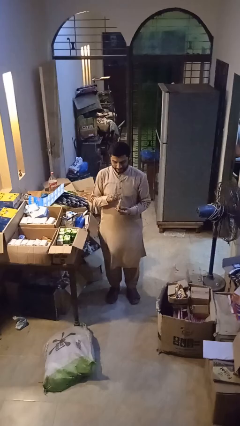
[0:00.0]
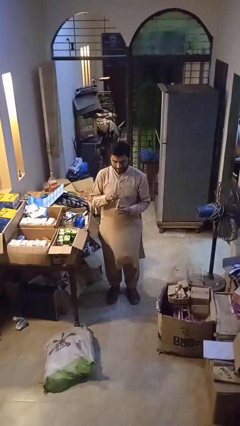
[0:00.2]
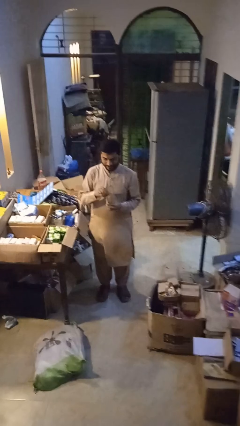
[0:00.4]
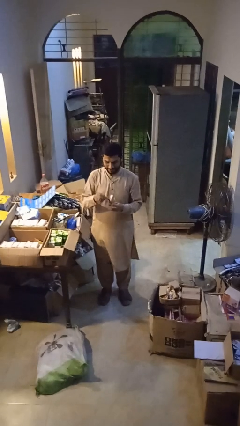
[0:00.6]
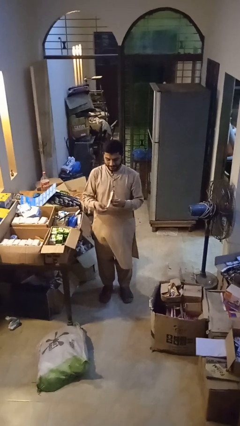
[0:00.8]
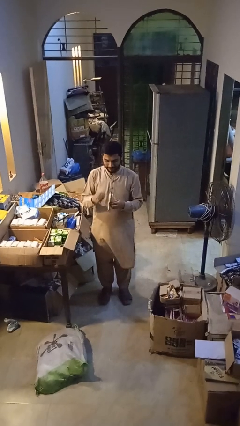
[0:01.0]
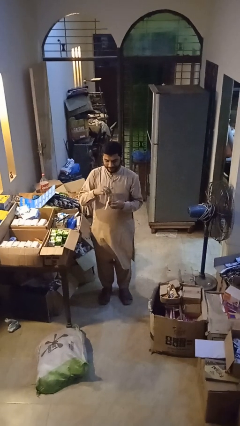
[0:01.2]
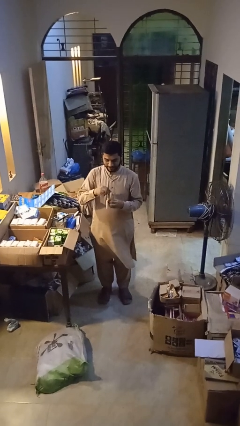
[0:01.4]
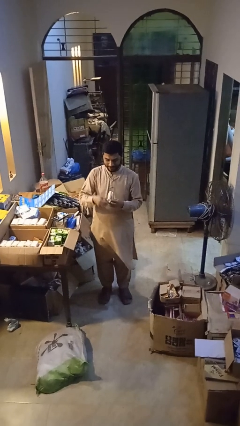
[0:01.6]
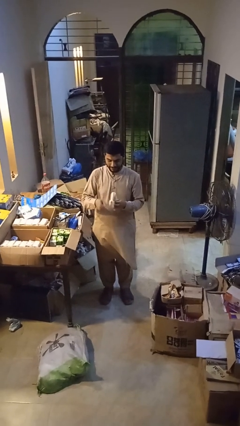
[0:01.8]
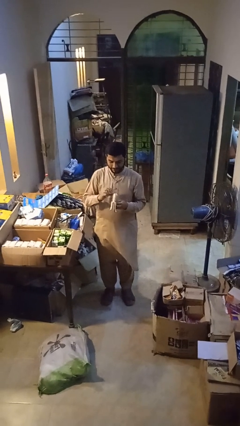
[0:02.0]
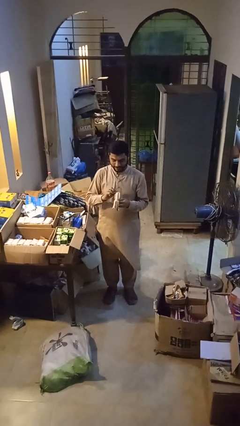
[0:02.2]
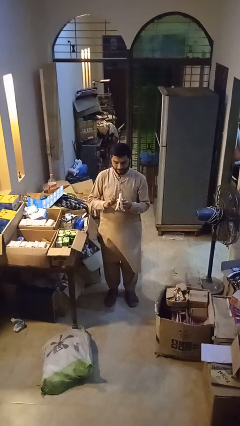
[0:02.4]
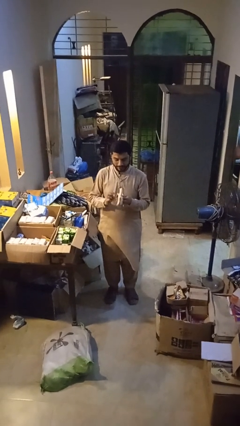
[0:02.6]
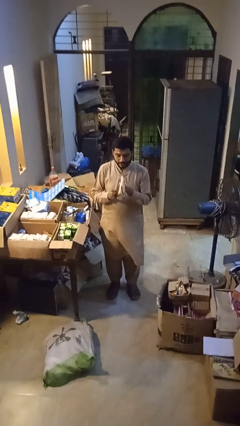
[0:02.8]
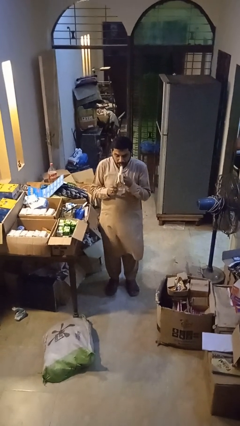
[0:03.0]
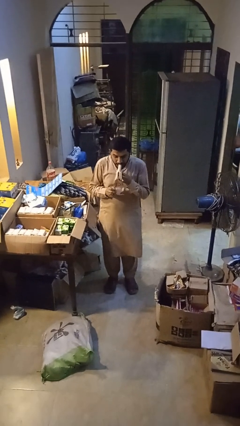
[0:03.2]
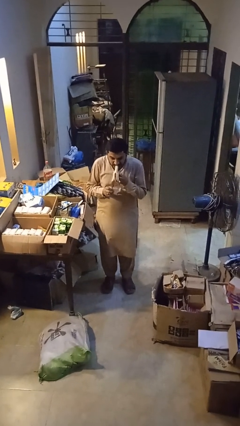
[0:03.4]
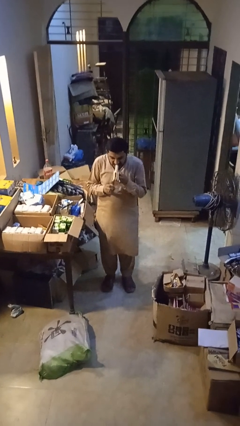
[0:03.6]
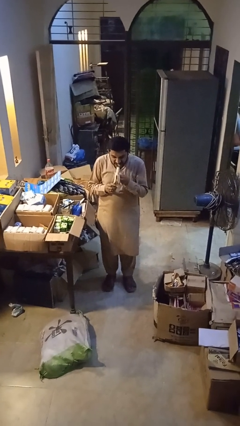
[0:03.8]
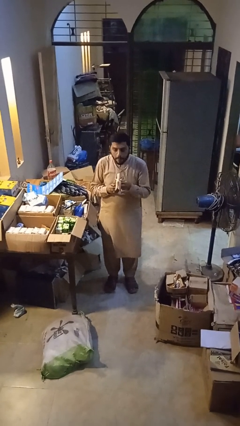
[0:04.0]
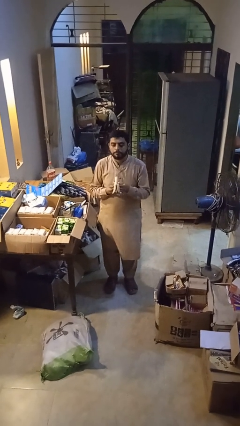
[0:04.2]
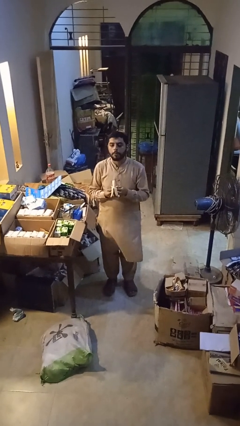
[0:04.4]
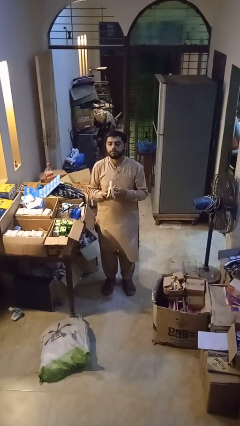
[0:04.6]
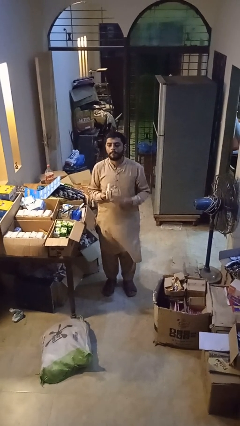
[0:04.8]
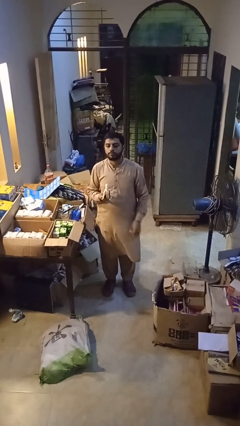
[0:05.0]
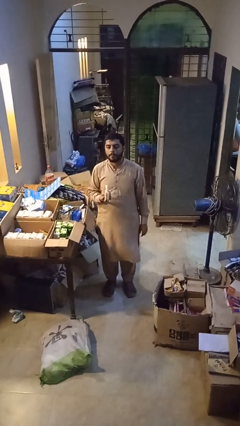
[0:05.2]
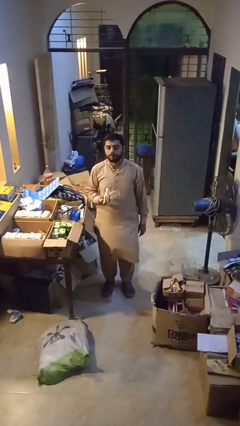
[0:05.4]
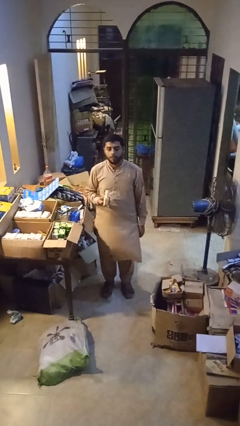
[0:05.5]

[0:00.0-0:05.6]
person eats banana

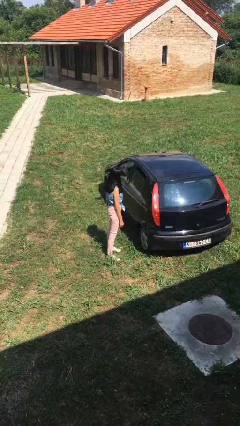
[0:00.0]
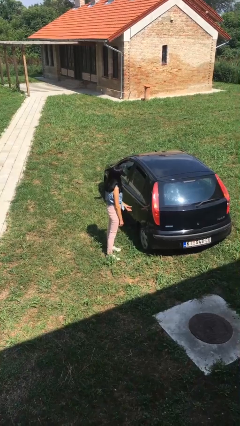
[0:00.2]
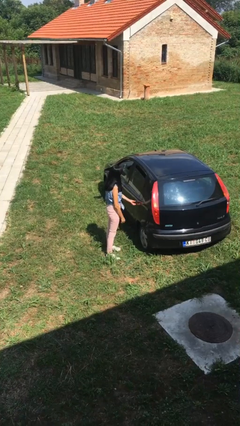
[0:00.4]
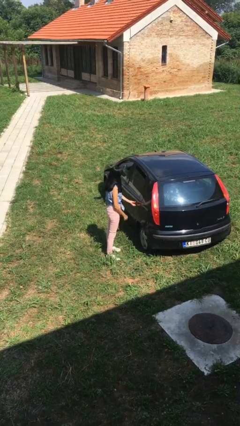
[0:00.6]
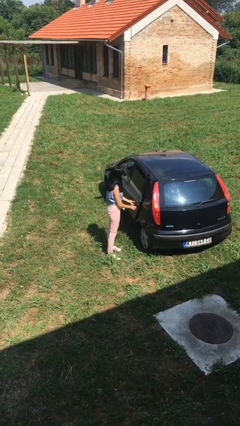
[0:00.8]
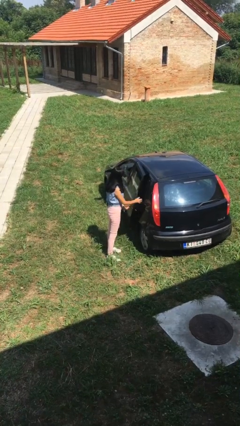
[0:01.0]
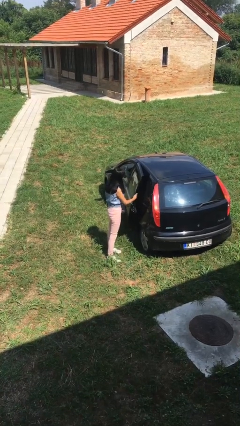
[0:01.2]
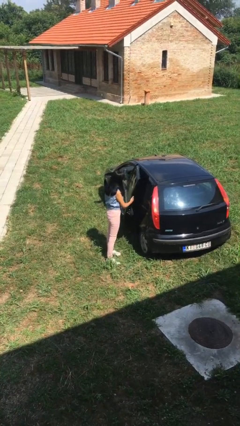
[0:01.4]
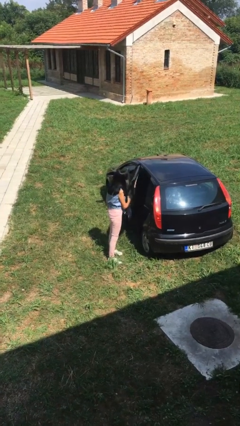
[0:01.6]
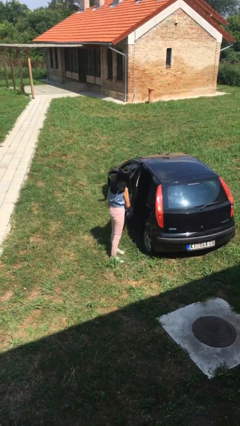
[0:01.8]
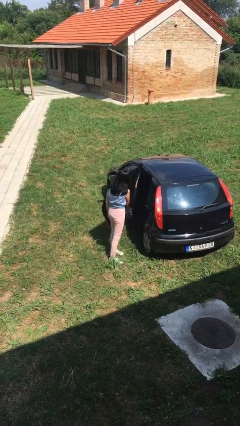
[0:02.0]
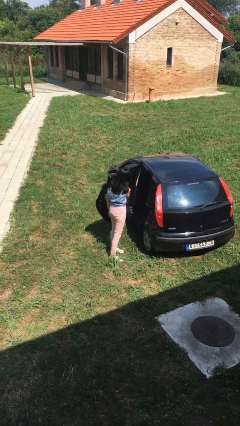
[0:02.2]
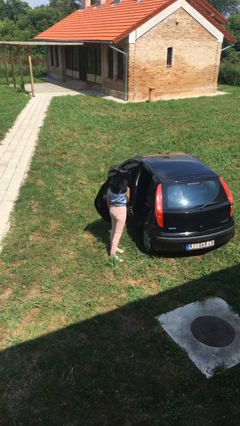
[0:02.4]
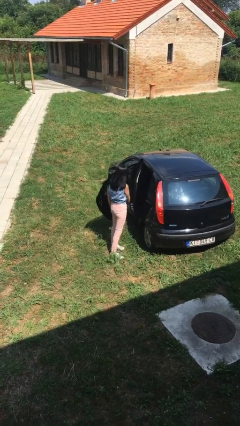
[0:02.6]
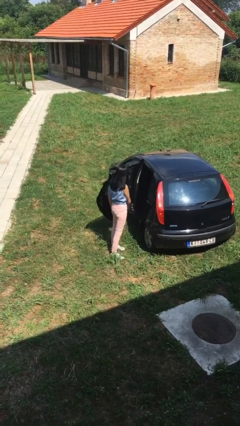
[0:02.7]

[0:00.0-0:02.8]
person opens car door

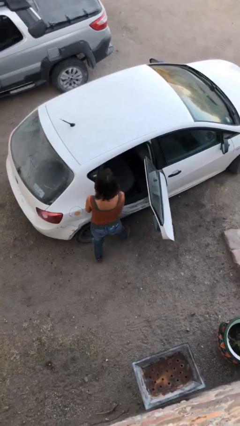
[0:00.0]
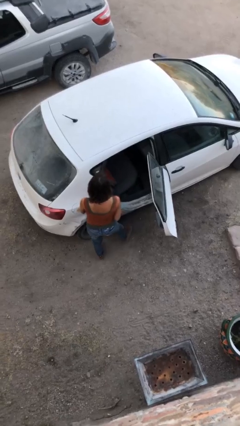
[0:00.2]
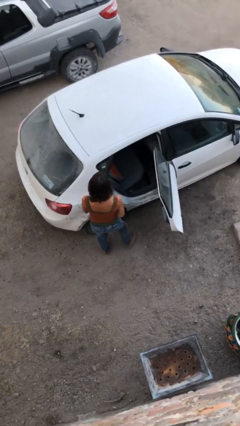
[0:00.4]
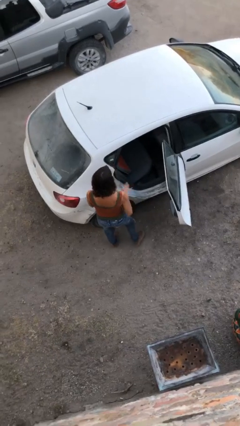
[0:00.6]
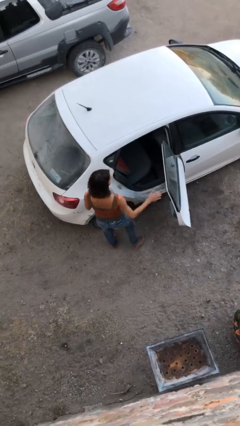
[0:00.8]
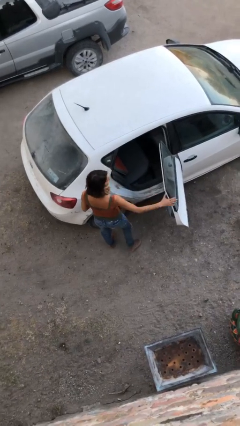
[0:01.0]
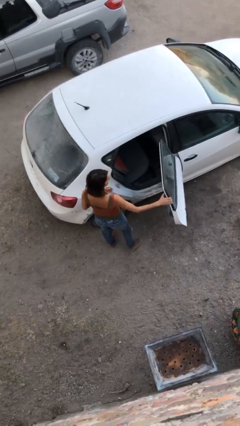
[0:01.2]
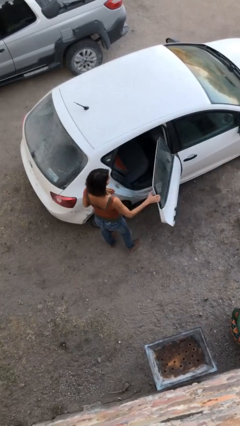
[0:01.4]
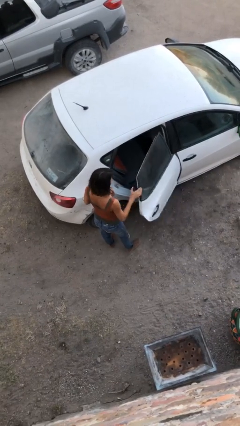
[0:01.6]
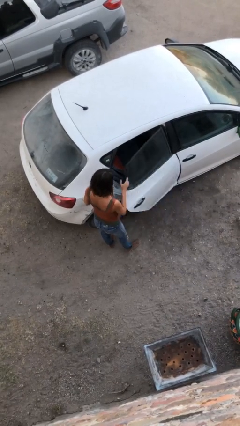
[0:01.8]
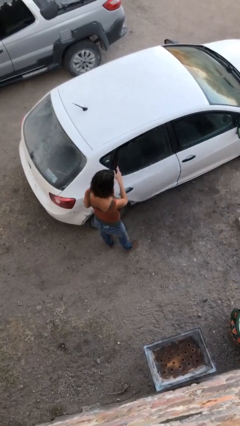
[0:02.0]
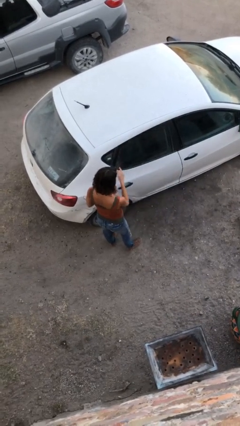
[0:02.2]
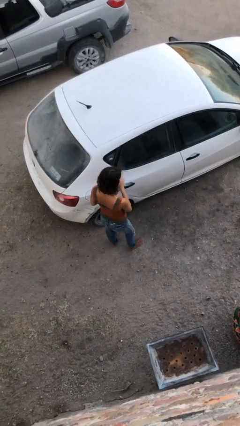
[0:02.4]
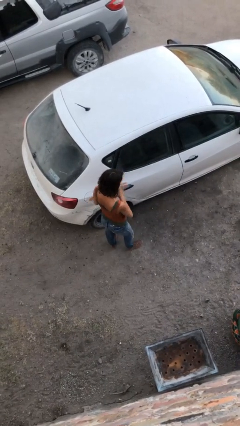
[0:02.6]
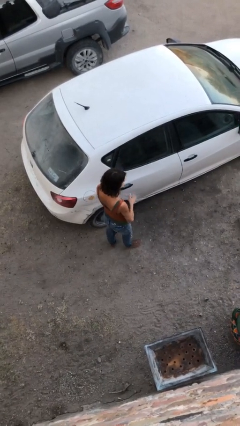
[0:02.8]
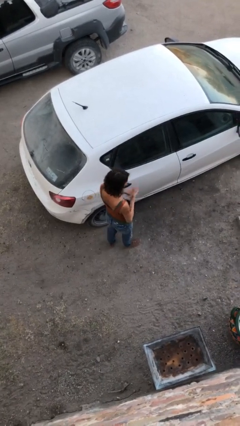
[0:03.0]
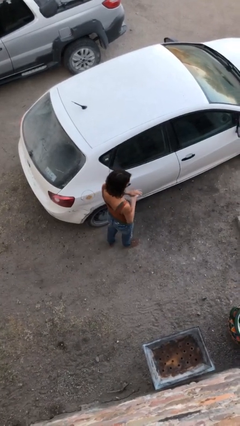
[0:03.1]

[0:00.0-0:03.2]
person closes car door

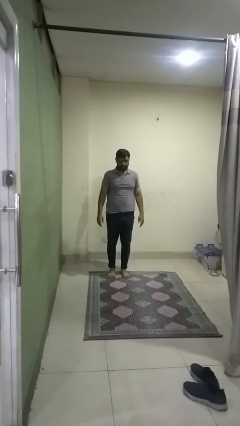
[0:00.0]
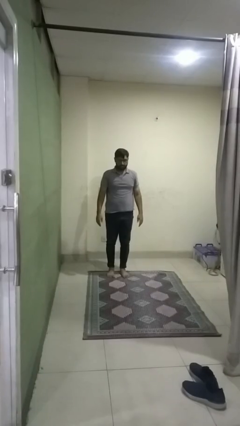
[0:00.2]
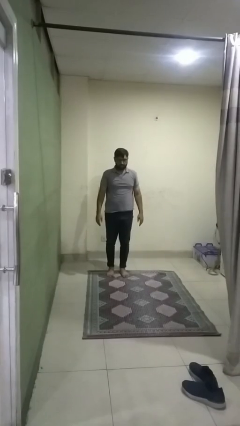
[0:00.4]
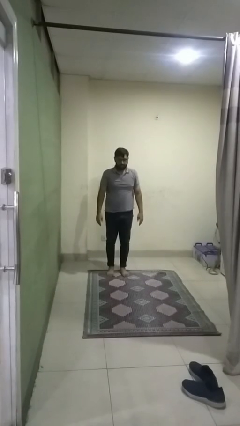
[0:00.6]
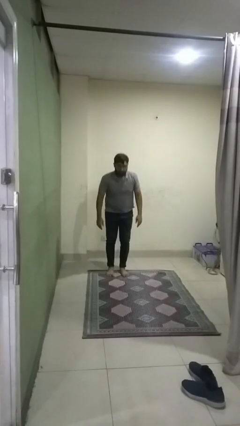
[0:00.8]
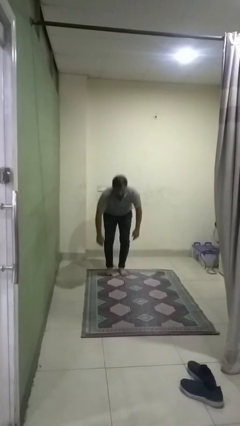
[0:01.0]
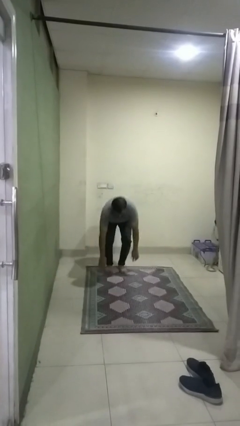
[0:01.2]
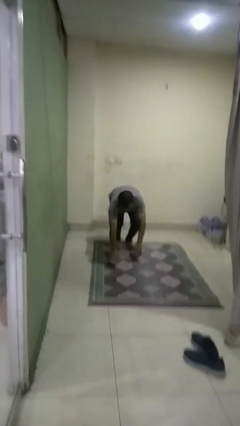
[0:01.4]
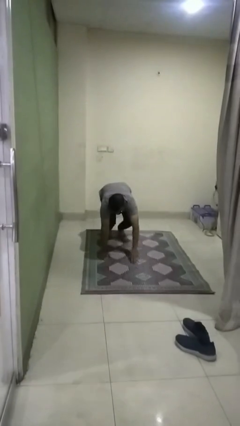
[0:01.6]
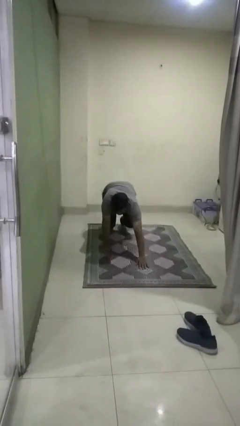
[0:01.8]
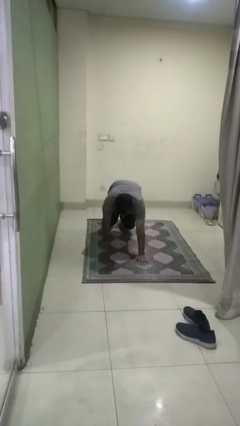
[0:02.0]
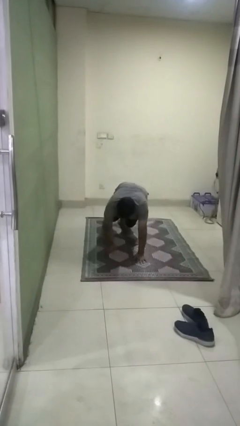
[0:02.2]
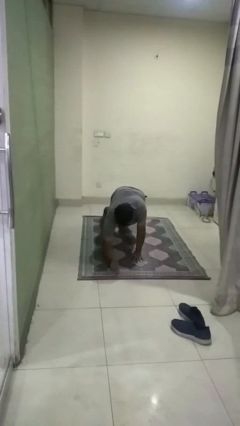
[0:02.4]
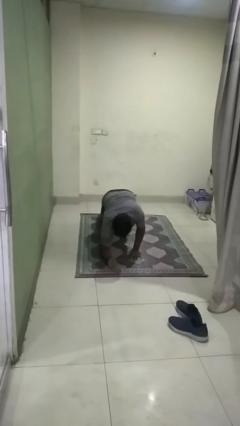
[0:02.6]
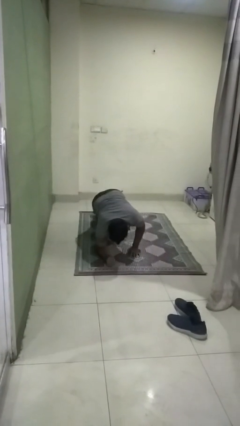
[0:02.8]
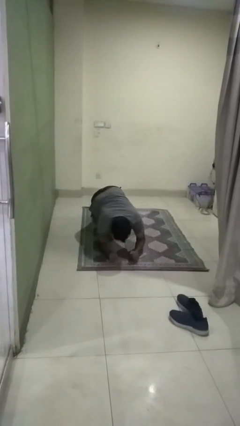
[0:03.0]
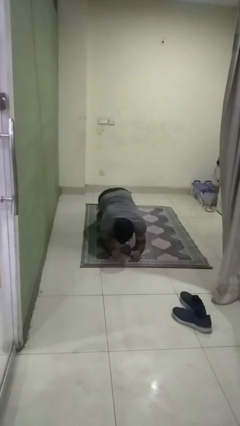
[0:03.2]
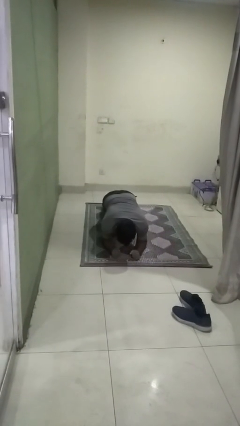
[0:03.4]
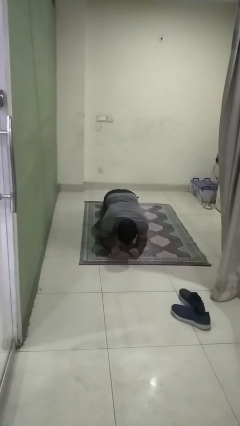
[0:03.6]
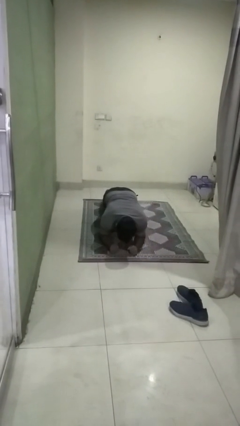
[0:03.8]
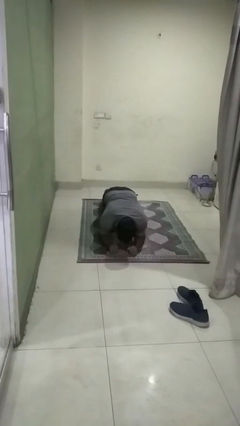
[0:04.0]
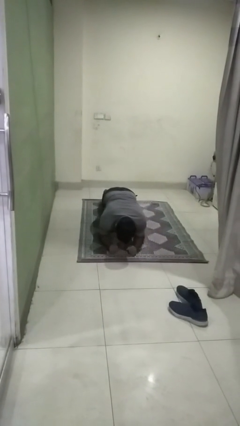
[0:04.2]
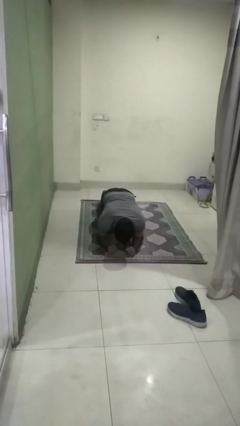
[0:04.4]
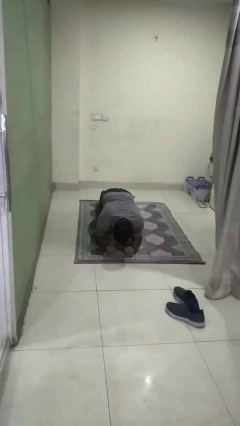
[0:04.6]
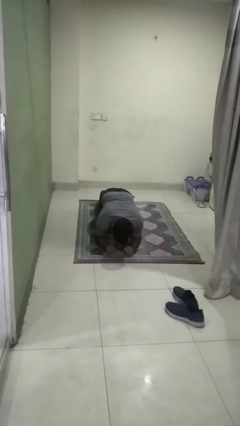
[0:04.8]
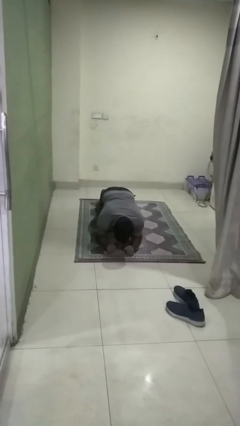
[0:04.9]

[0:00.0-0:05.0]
person exercises with plank

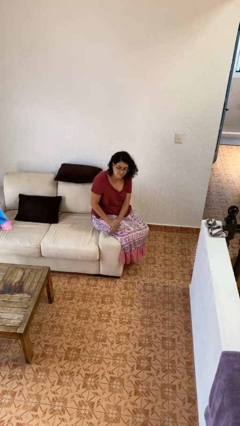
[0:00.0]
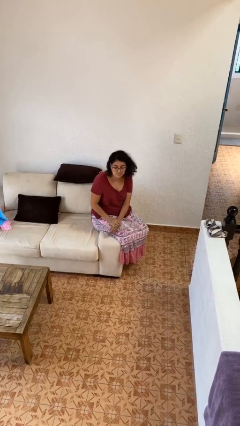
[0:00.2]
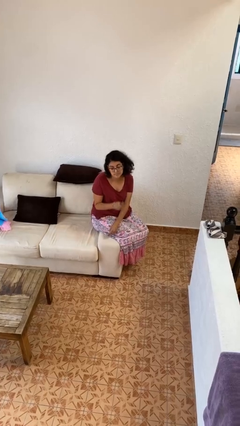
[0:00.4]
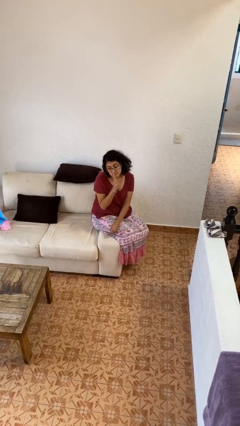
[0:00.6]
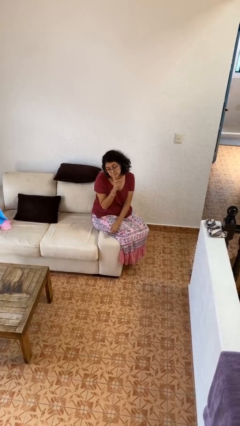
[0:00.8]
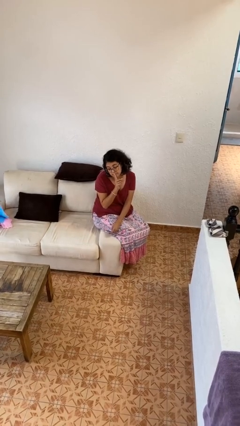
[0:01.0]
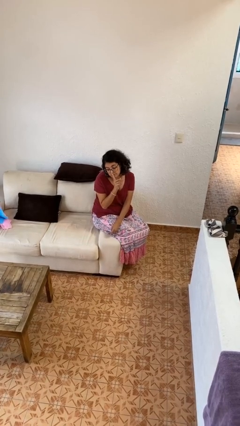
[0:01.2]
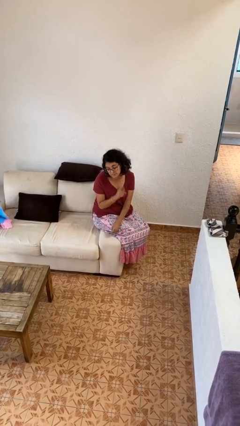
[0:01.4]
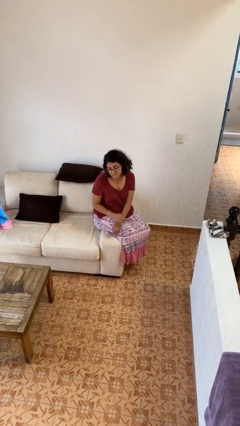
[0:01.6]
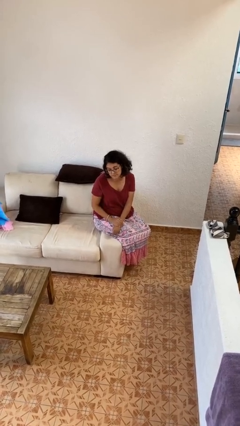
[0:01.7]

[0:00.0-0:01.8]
person gestures be quiet
